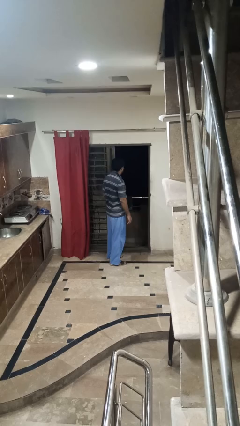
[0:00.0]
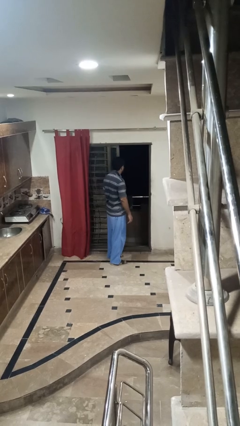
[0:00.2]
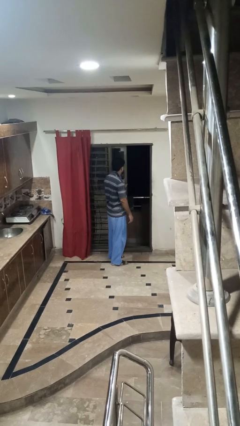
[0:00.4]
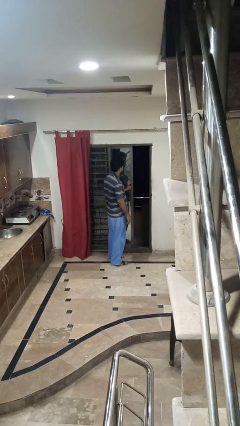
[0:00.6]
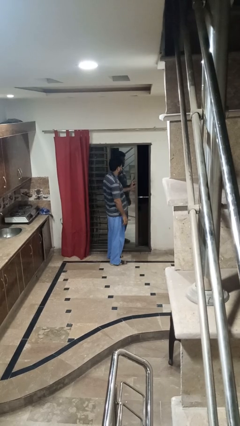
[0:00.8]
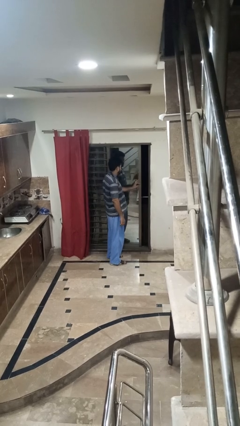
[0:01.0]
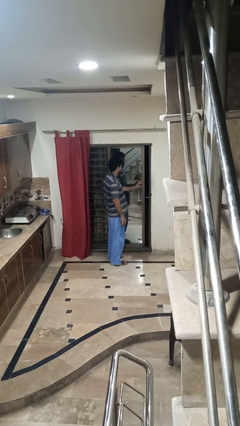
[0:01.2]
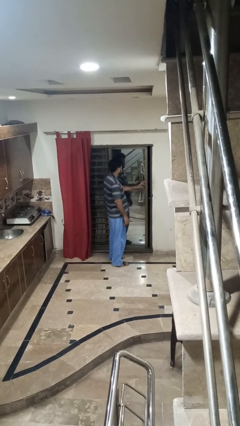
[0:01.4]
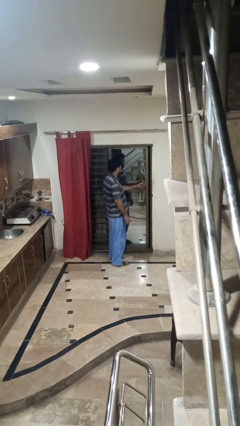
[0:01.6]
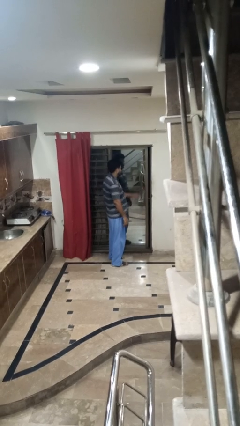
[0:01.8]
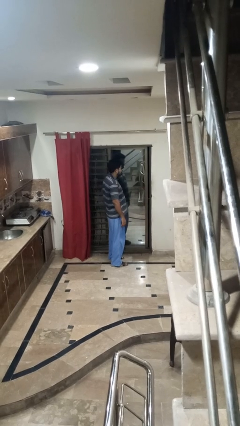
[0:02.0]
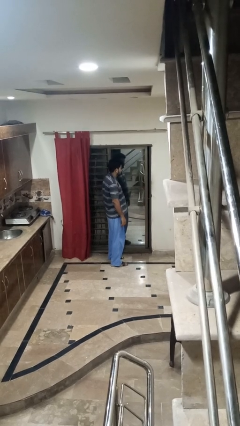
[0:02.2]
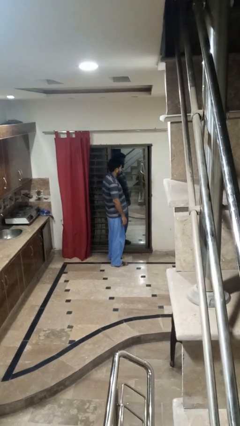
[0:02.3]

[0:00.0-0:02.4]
person closes sliding door

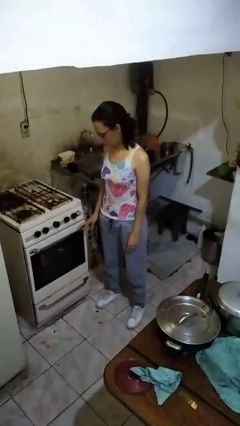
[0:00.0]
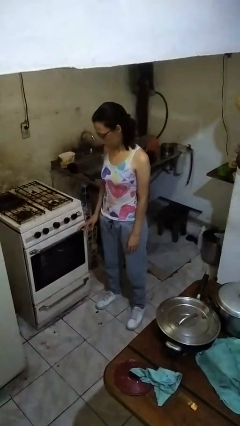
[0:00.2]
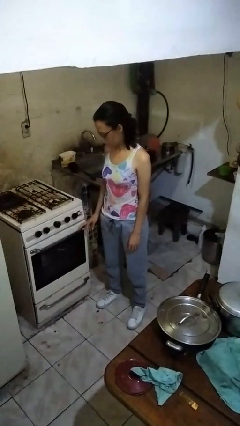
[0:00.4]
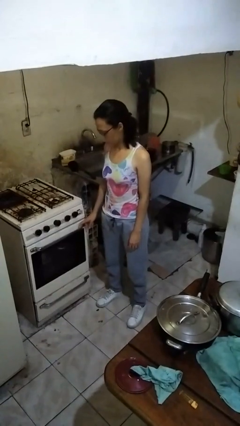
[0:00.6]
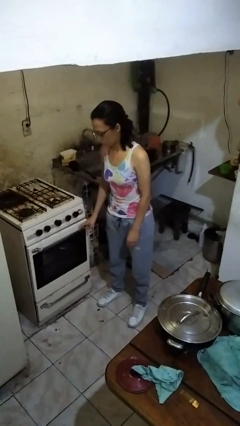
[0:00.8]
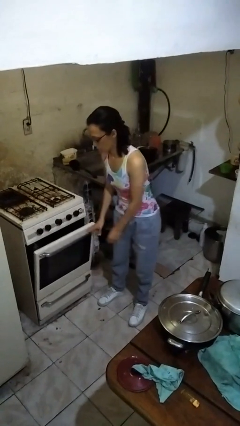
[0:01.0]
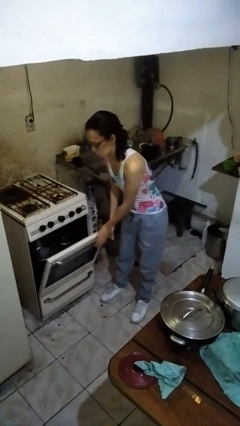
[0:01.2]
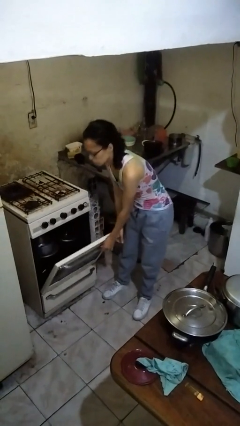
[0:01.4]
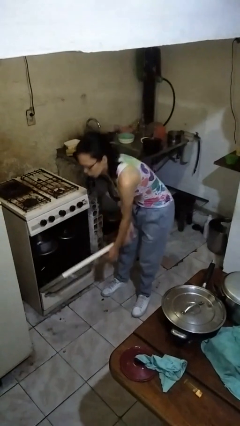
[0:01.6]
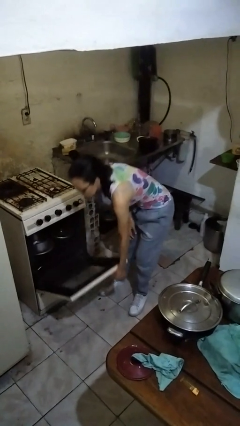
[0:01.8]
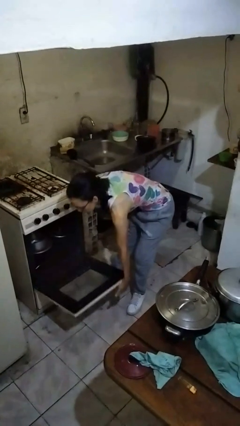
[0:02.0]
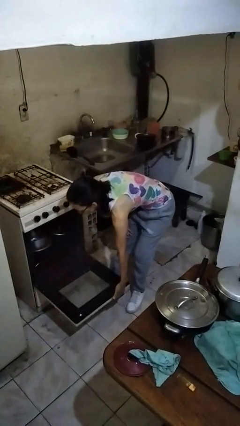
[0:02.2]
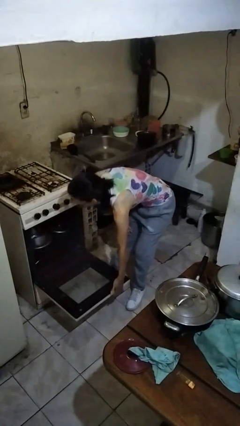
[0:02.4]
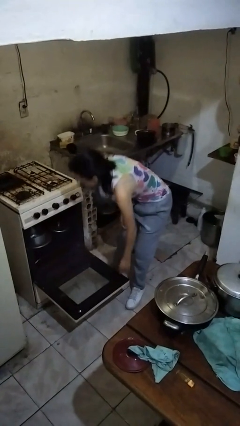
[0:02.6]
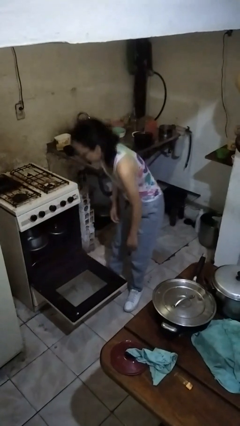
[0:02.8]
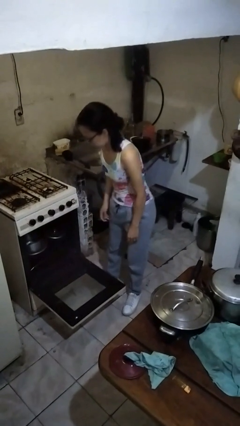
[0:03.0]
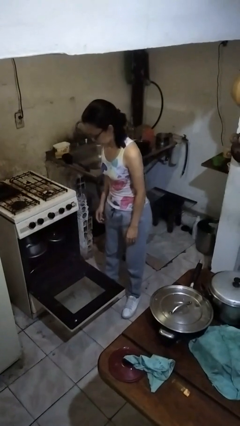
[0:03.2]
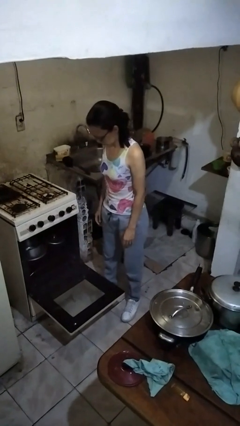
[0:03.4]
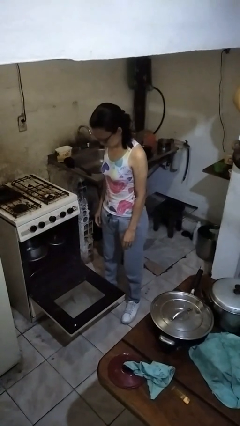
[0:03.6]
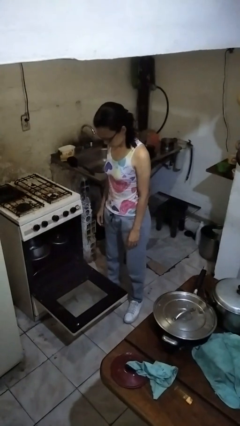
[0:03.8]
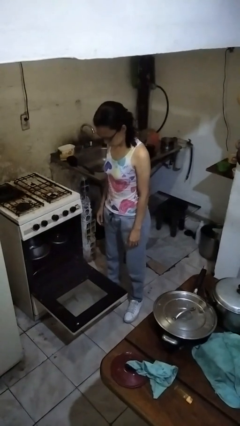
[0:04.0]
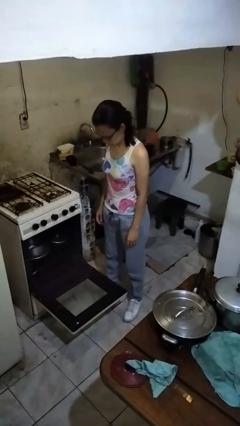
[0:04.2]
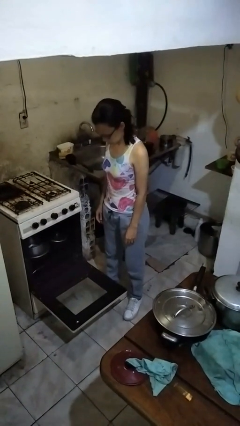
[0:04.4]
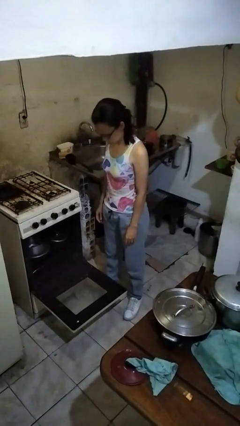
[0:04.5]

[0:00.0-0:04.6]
person opens oven door

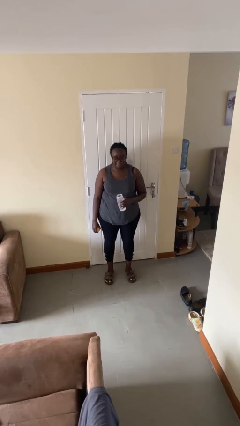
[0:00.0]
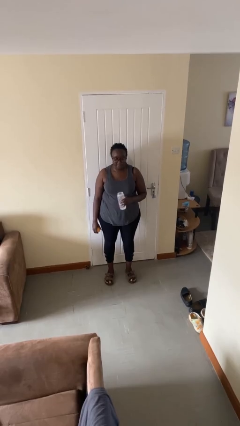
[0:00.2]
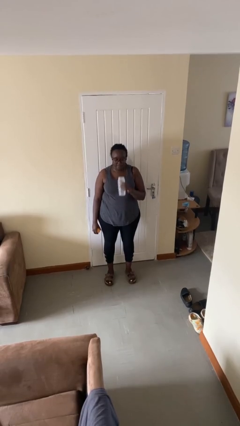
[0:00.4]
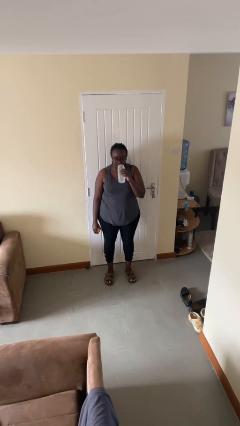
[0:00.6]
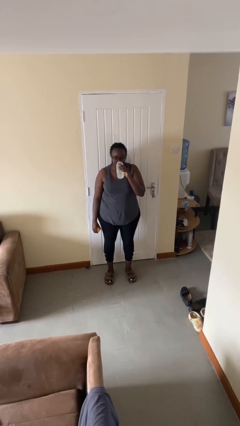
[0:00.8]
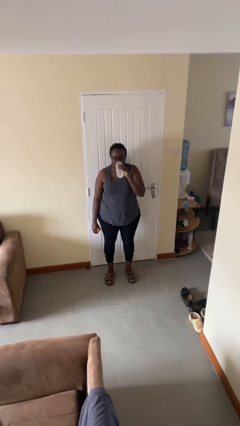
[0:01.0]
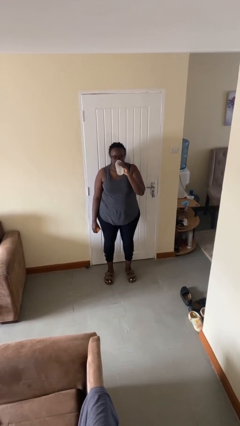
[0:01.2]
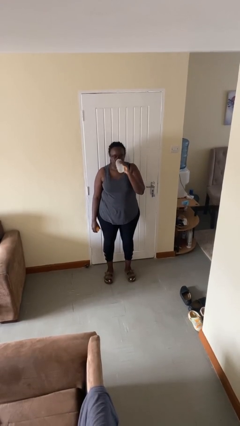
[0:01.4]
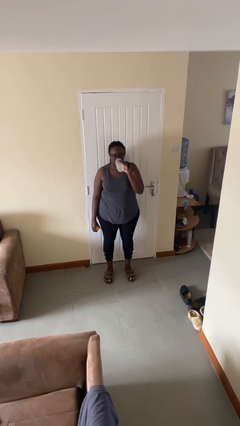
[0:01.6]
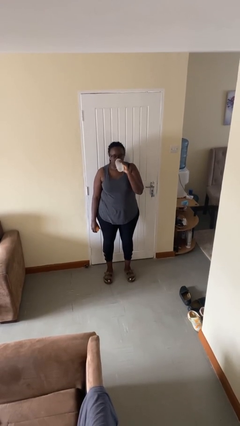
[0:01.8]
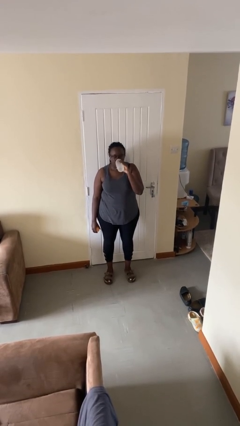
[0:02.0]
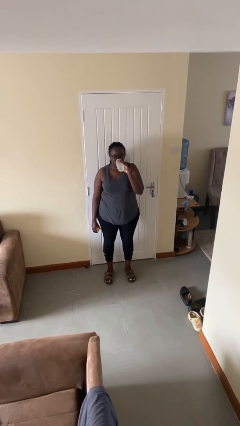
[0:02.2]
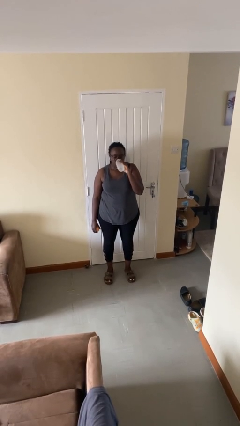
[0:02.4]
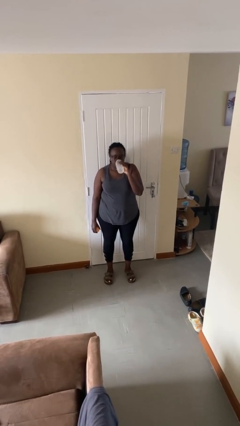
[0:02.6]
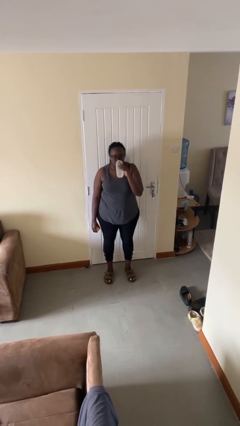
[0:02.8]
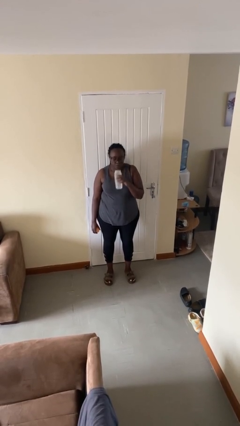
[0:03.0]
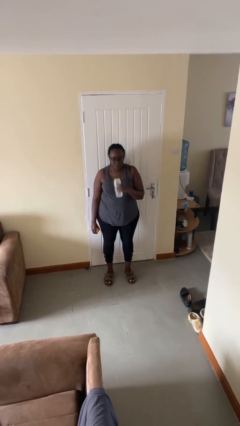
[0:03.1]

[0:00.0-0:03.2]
person drinks from bottle

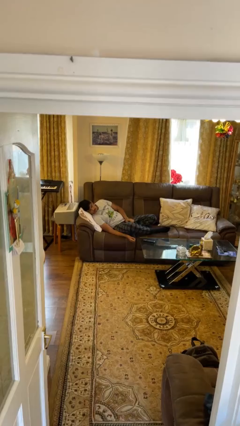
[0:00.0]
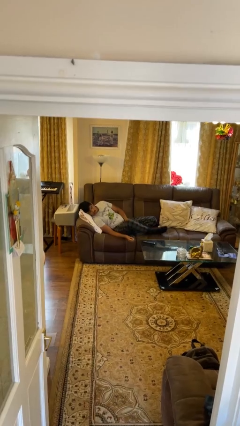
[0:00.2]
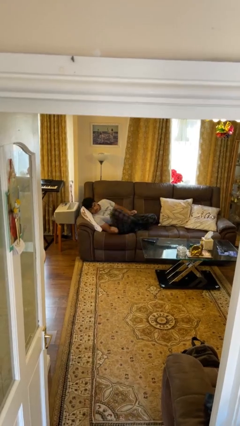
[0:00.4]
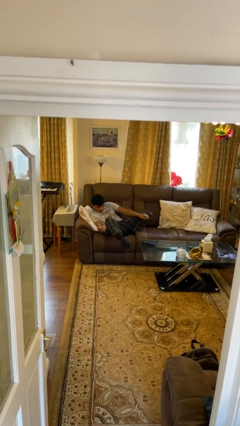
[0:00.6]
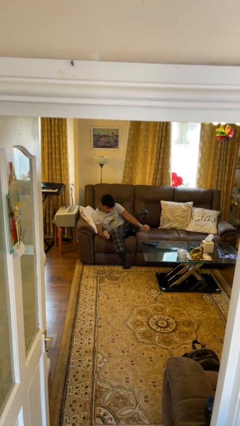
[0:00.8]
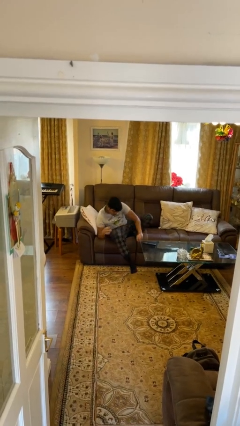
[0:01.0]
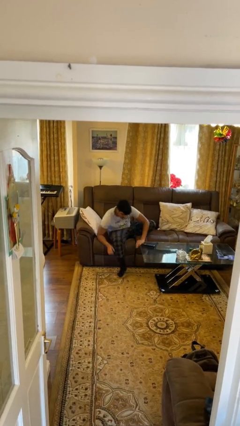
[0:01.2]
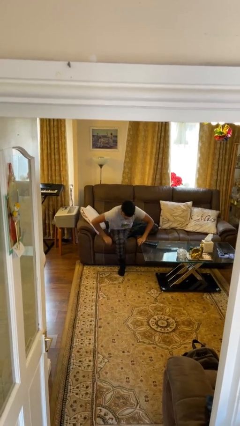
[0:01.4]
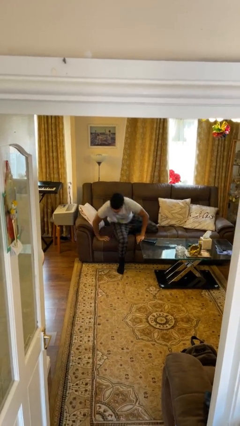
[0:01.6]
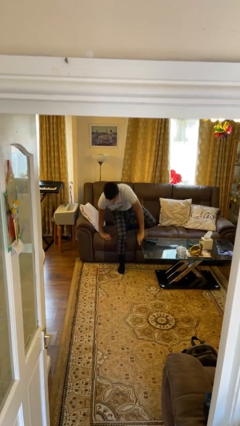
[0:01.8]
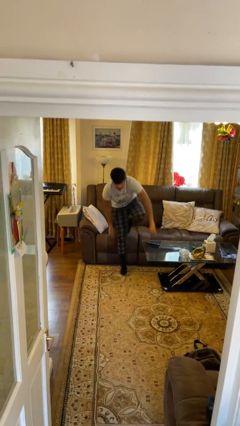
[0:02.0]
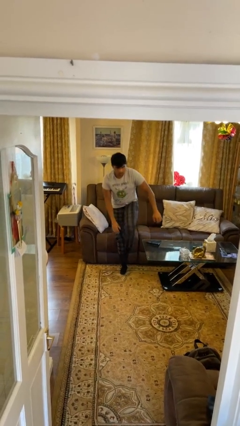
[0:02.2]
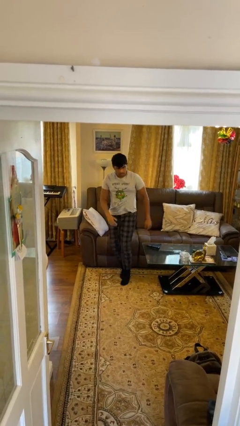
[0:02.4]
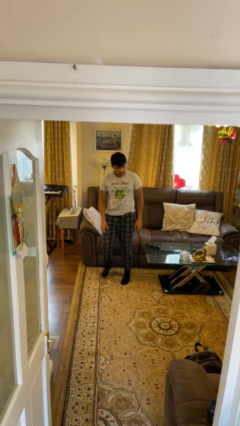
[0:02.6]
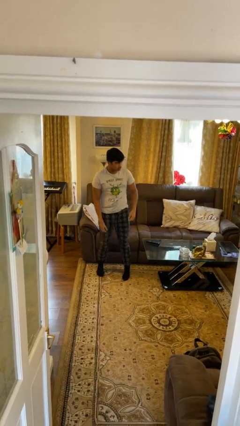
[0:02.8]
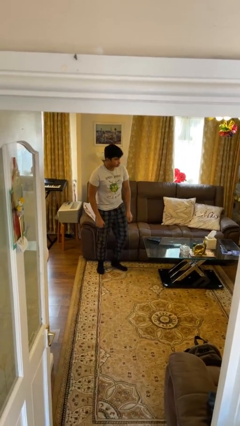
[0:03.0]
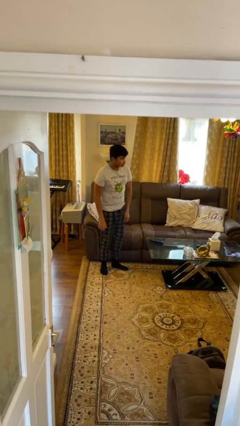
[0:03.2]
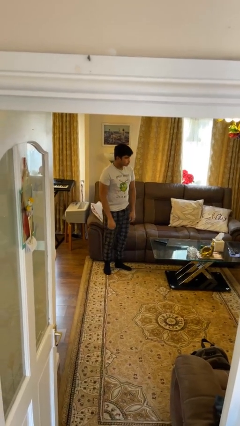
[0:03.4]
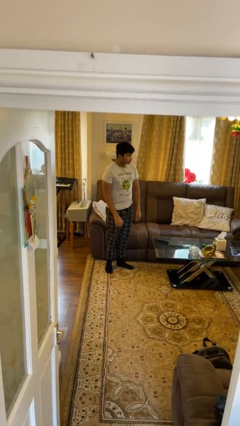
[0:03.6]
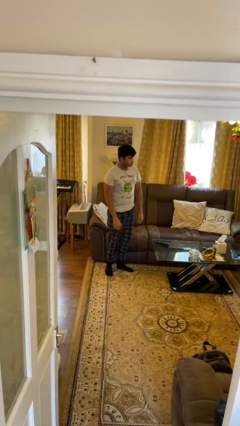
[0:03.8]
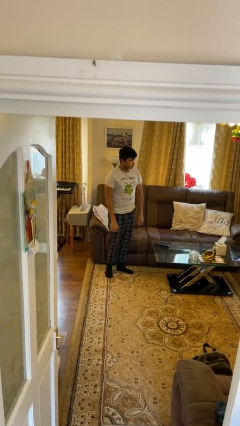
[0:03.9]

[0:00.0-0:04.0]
person stands up

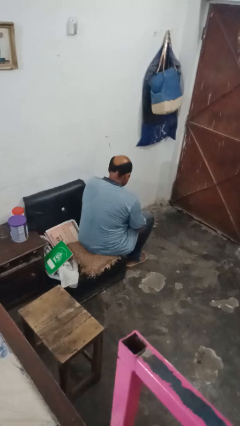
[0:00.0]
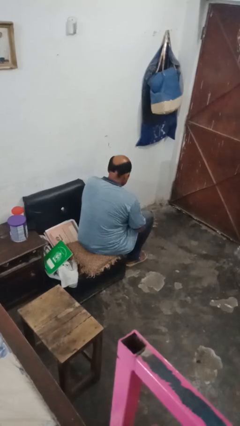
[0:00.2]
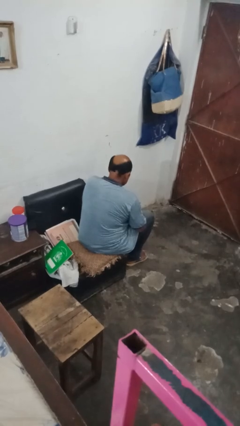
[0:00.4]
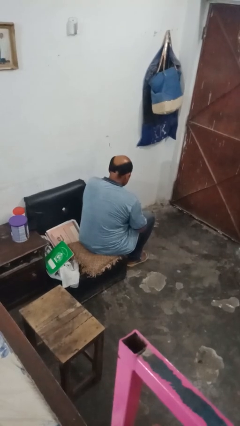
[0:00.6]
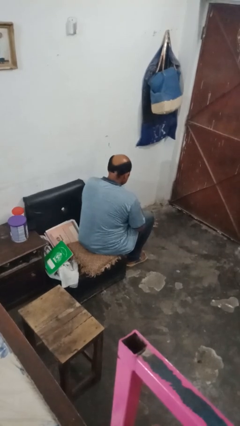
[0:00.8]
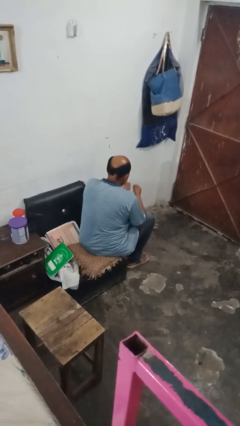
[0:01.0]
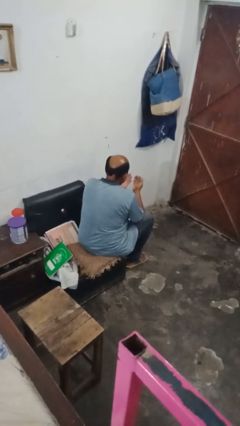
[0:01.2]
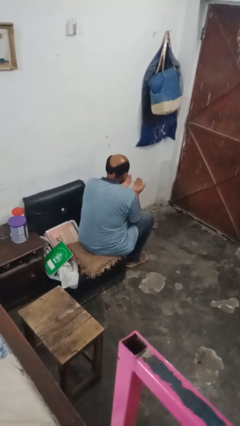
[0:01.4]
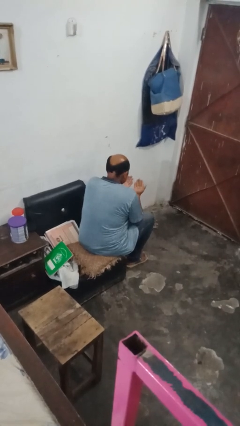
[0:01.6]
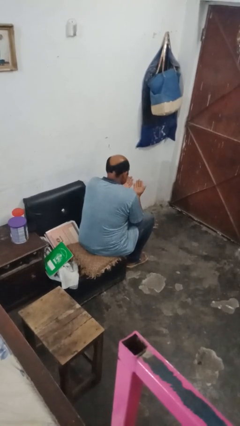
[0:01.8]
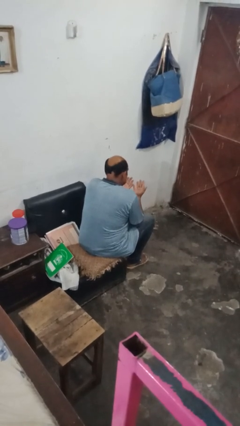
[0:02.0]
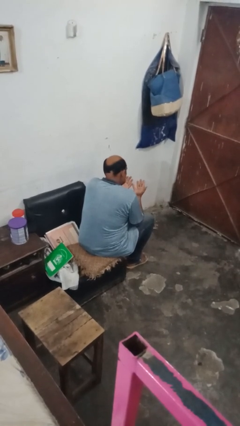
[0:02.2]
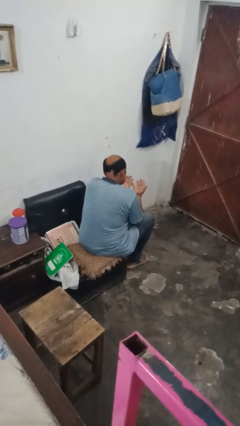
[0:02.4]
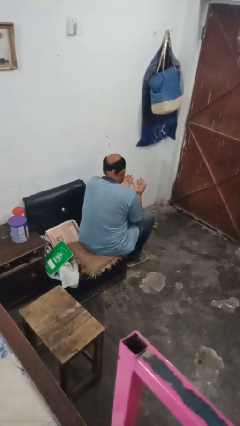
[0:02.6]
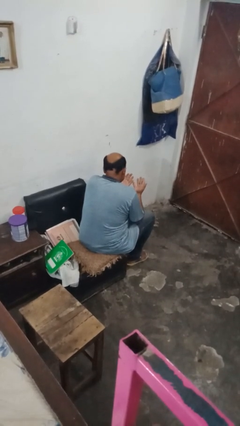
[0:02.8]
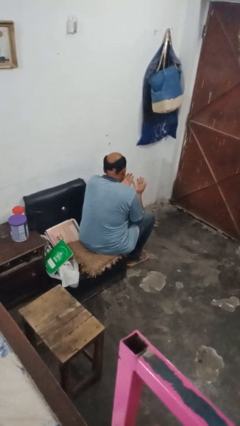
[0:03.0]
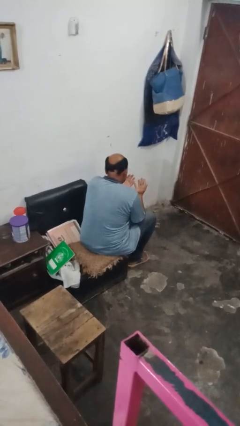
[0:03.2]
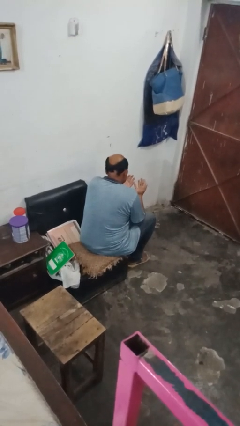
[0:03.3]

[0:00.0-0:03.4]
person looks at hands in lap
